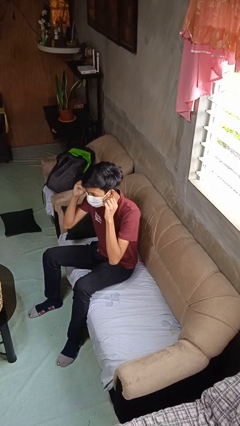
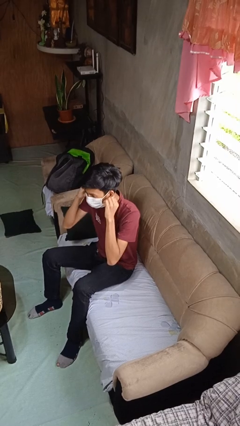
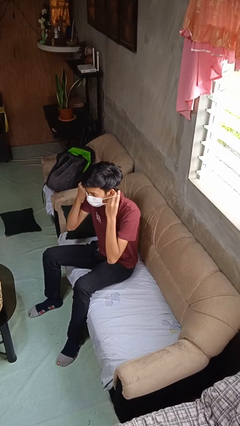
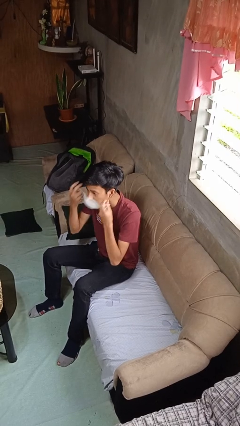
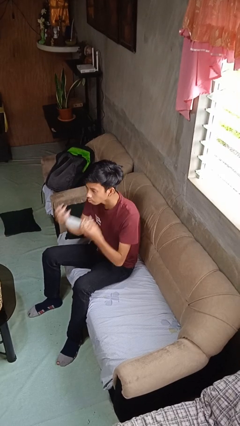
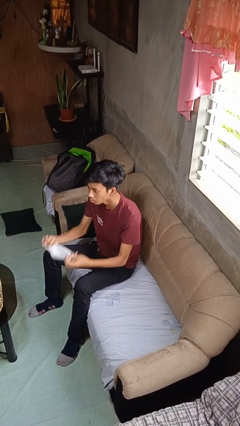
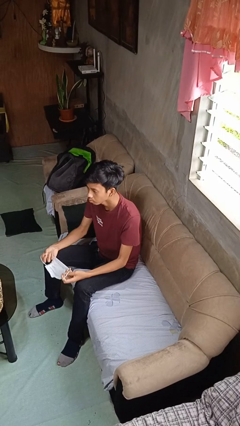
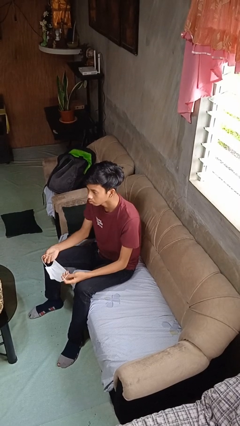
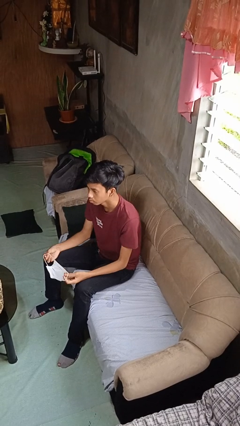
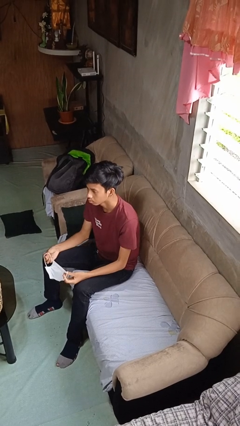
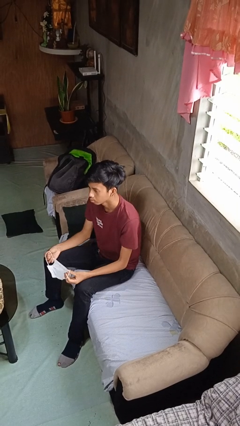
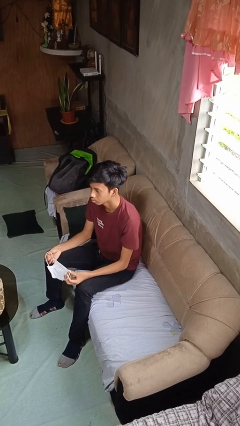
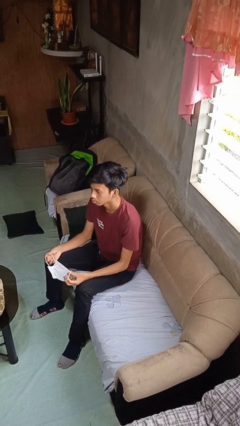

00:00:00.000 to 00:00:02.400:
person takes off facemask

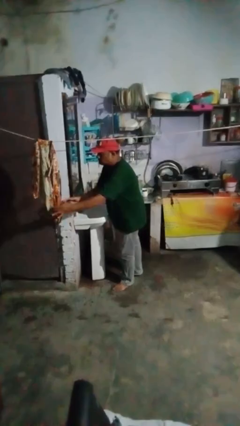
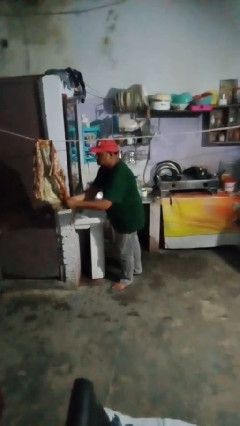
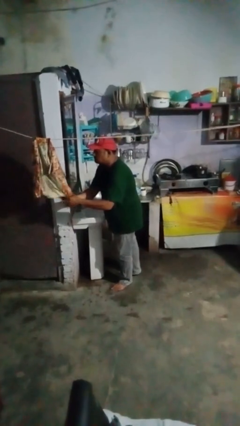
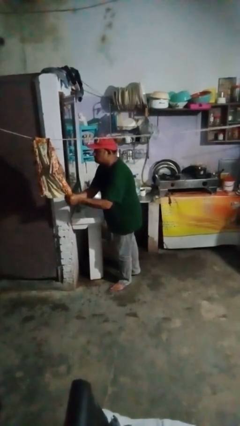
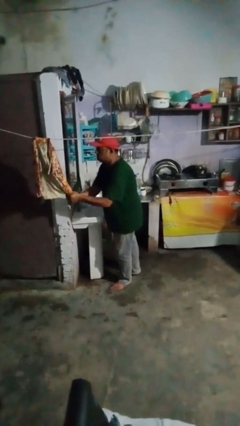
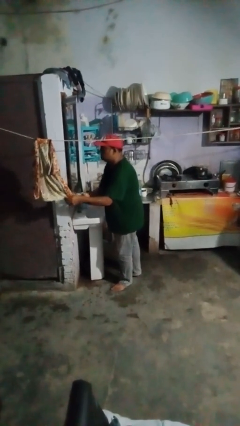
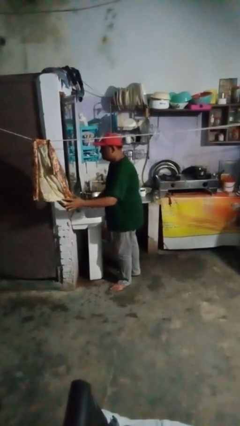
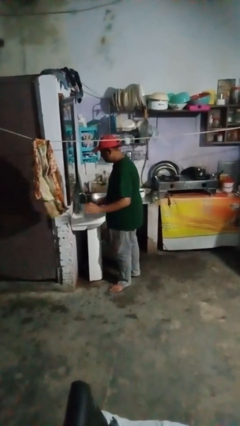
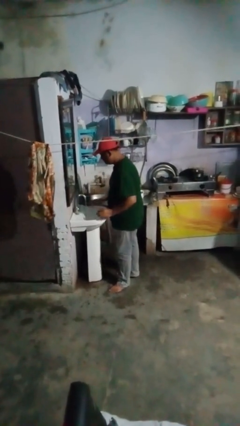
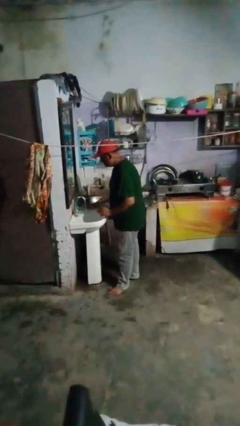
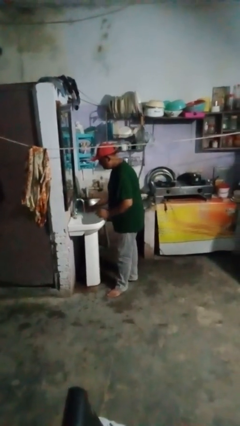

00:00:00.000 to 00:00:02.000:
person dries hands with towel

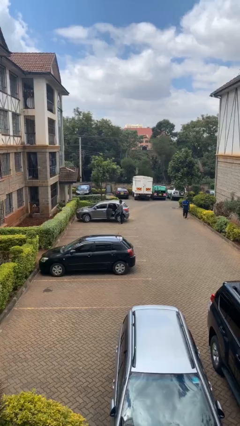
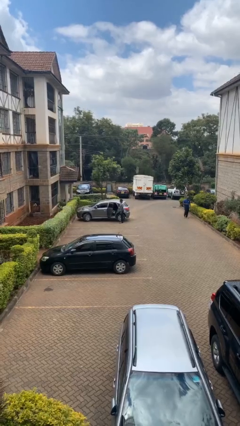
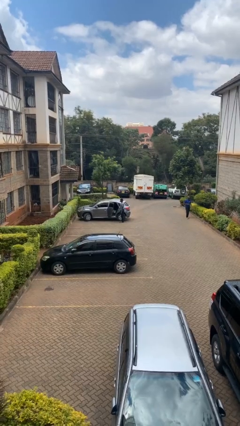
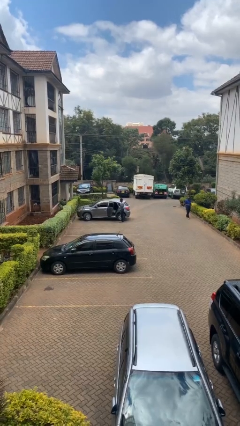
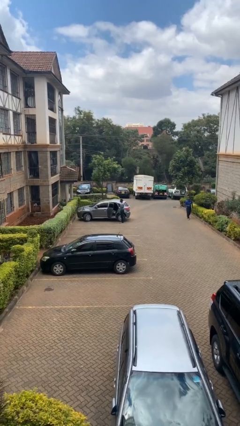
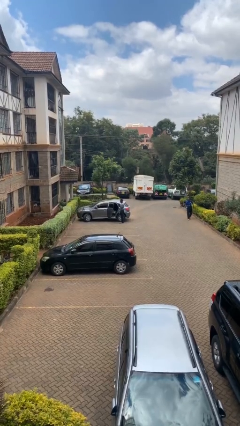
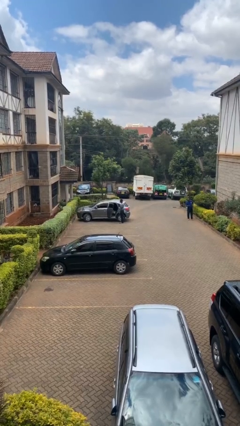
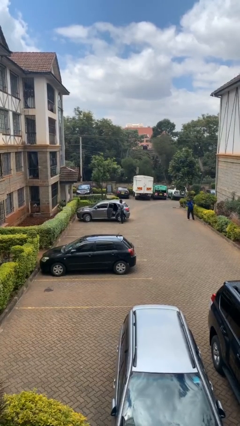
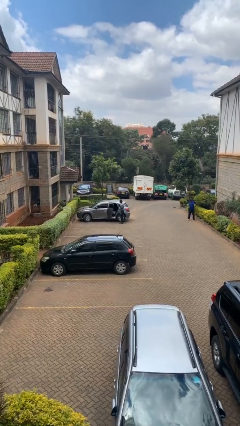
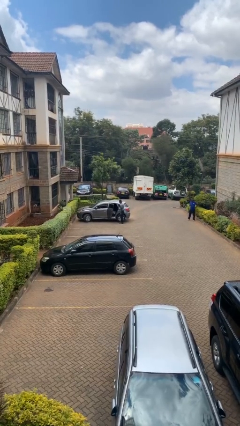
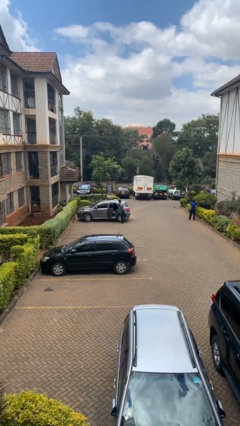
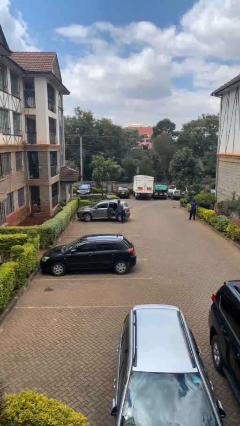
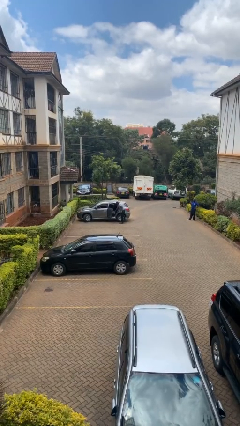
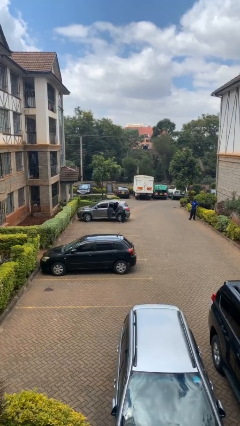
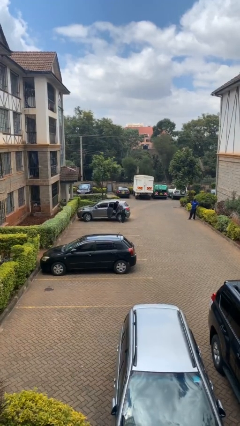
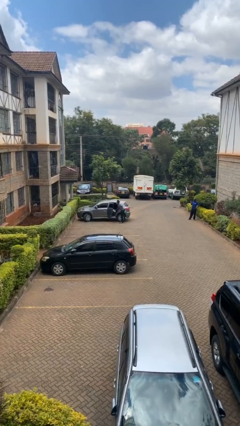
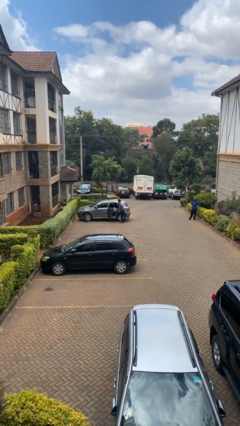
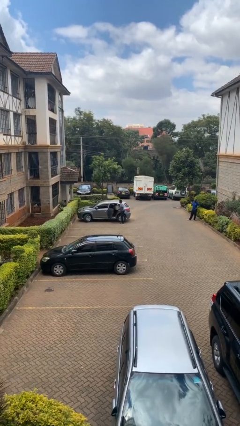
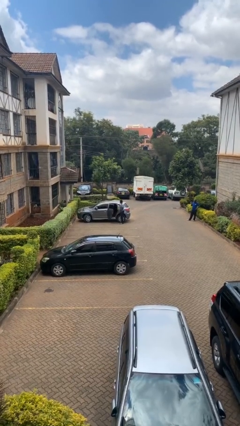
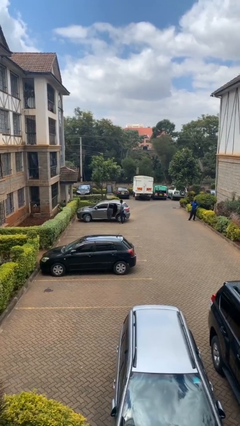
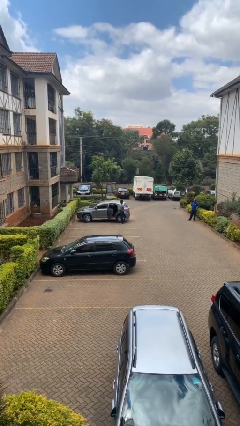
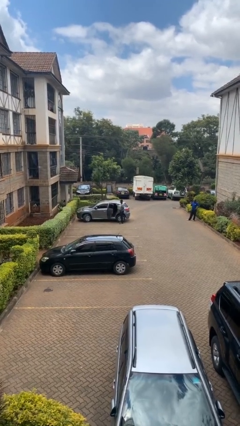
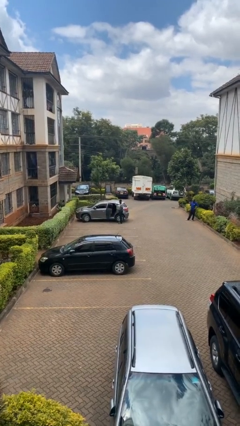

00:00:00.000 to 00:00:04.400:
person unloads car

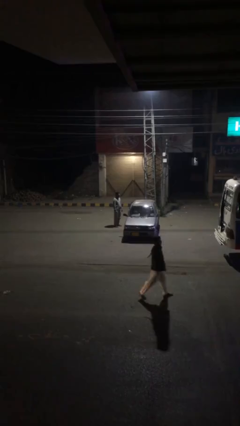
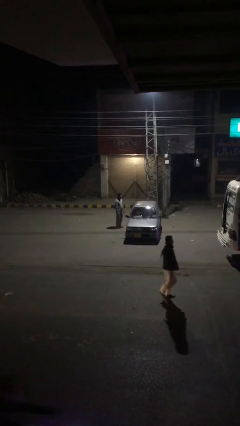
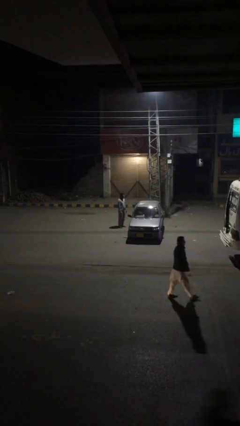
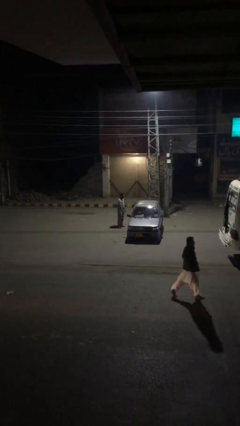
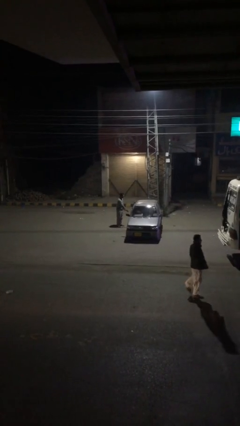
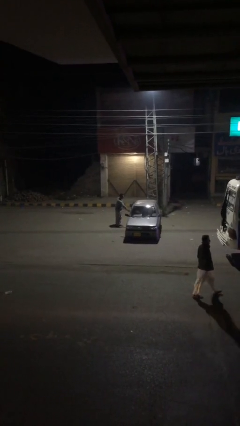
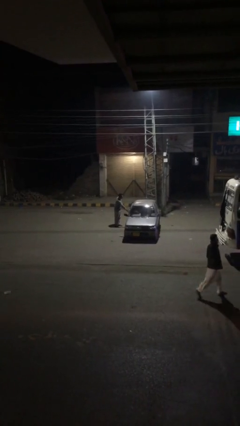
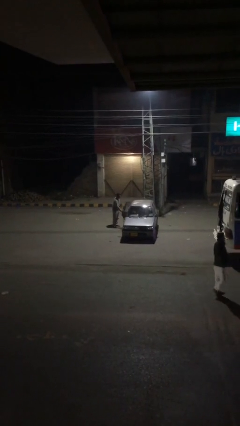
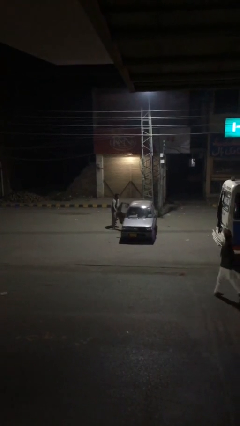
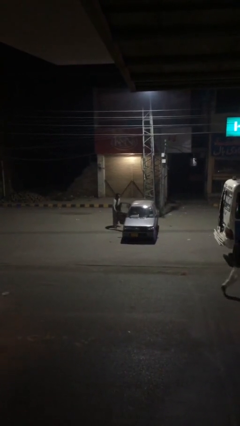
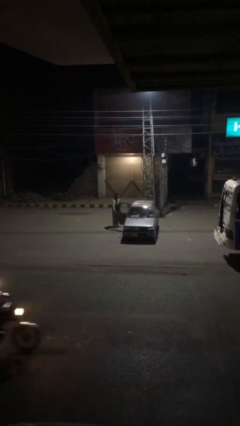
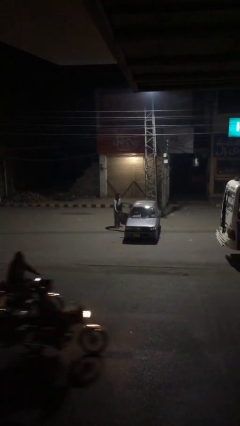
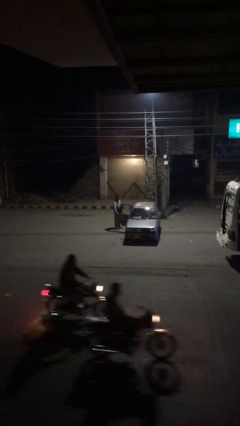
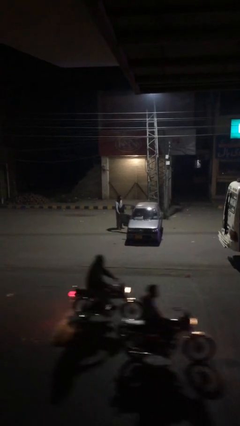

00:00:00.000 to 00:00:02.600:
person opens car door

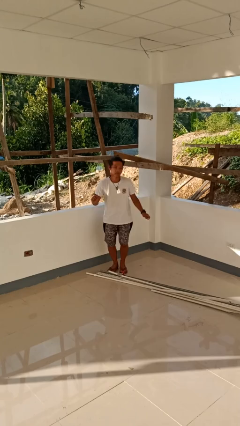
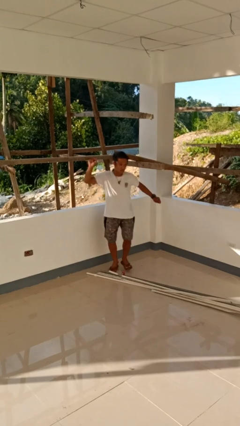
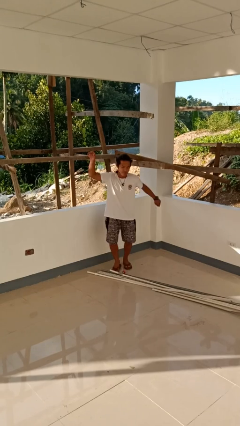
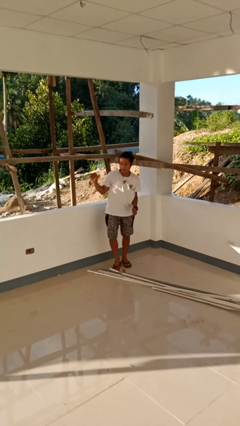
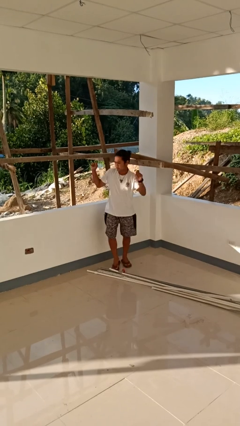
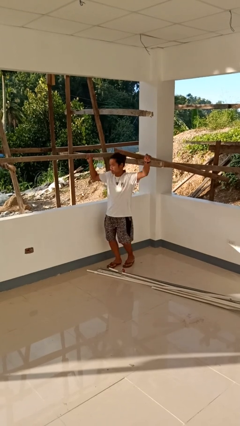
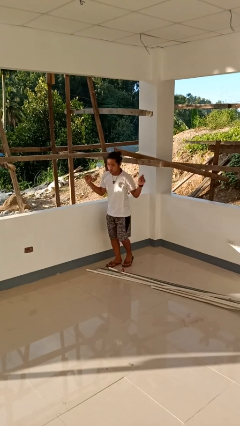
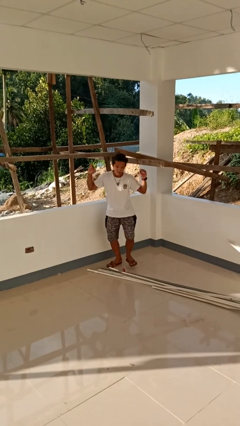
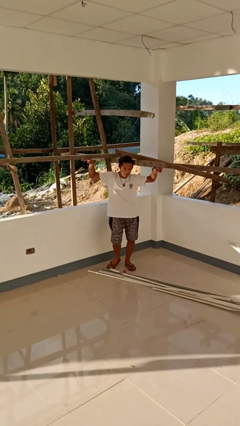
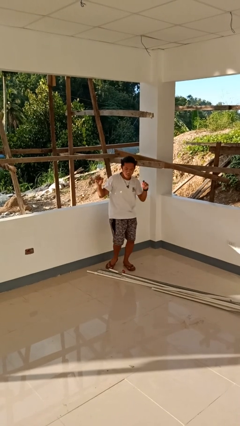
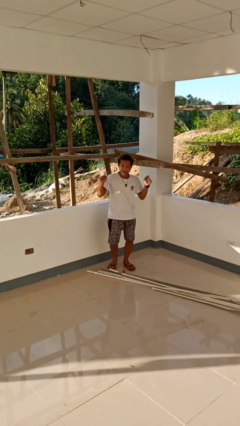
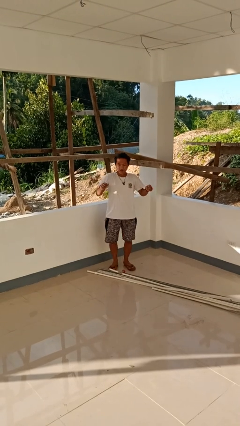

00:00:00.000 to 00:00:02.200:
person dances in place

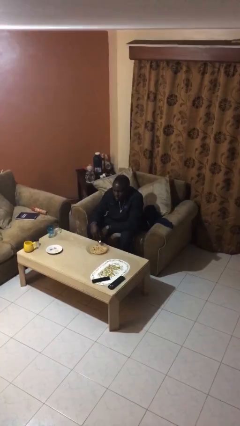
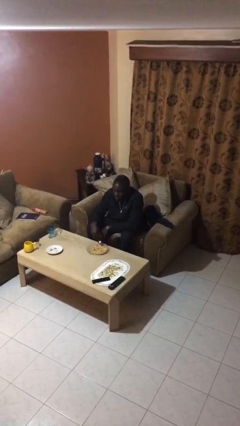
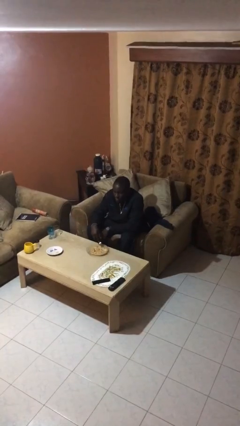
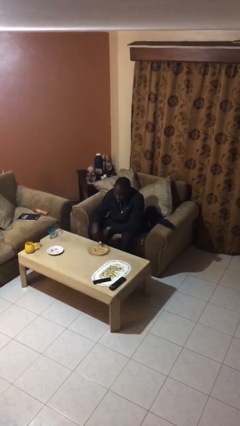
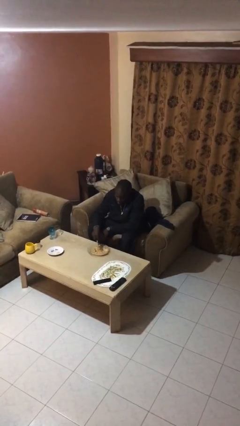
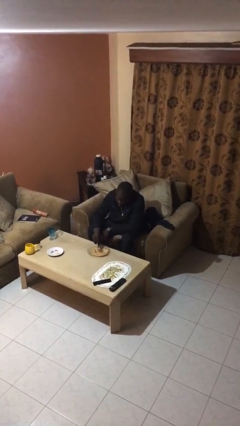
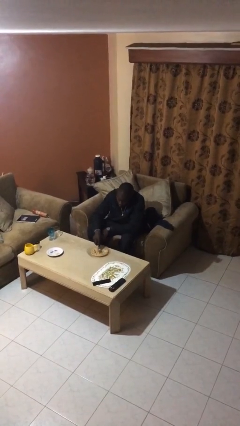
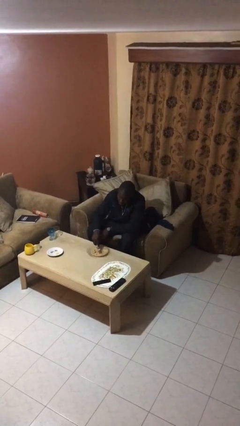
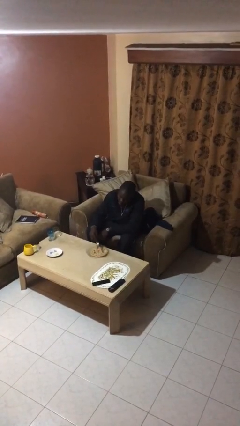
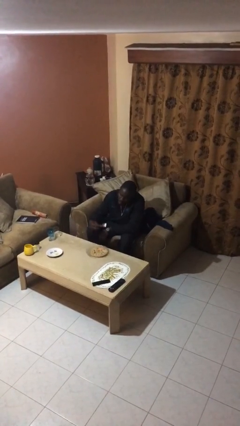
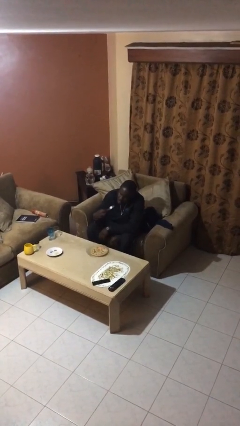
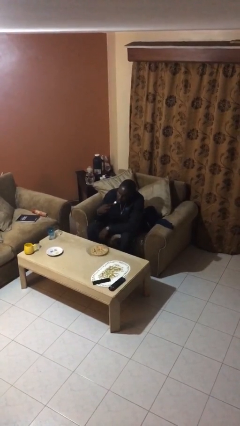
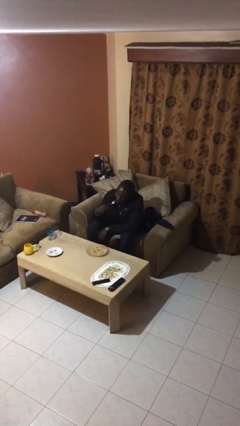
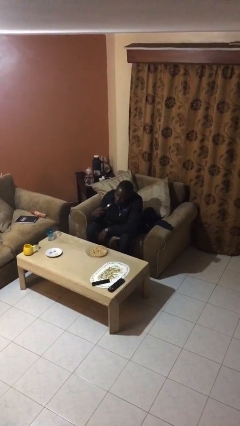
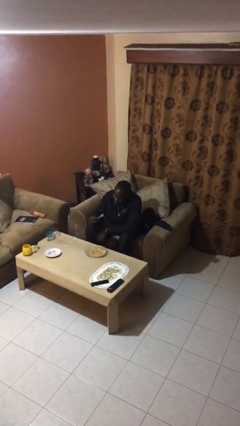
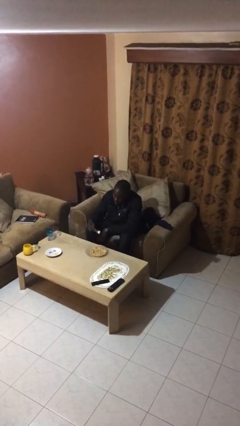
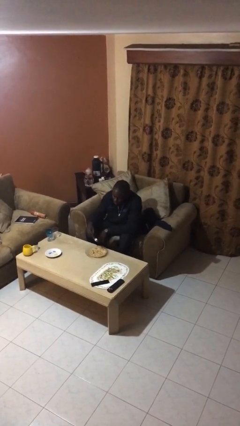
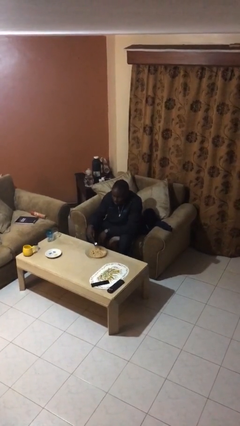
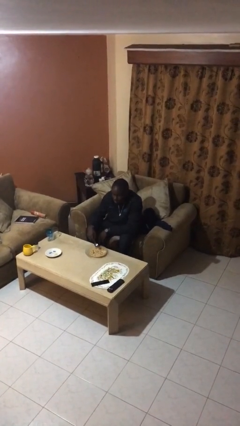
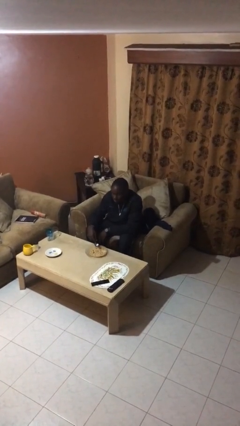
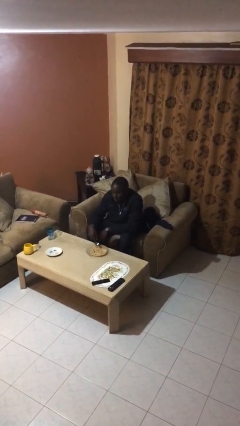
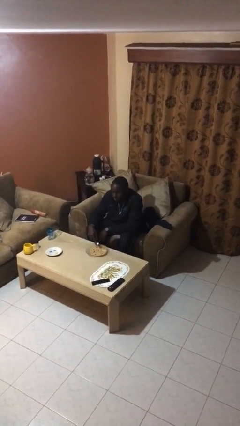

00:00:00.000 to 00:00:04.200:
person eats with utensil
